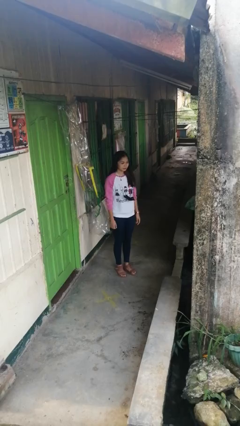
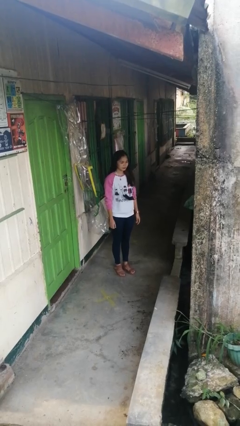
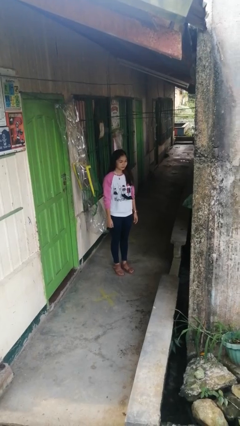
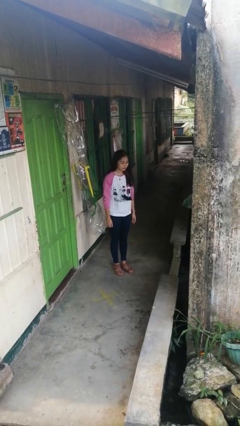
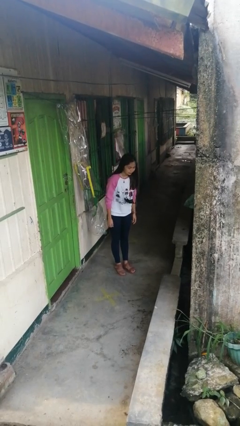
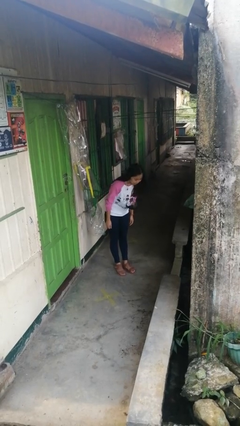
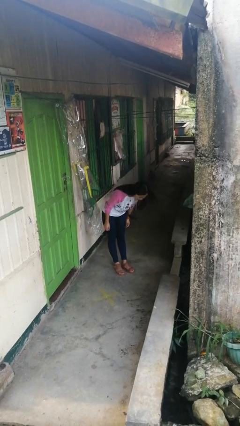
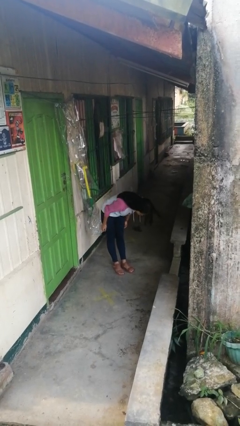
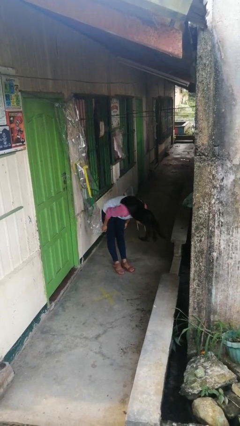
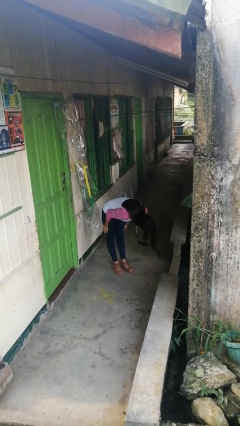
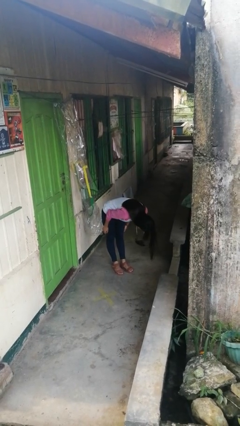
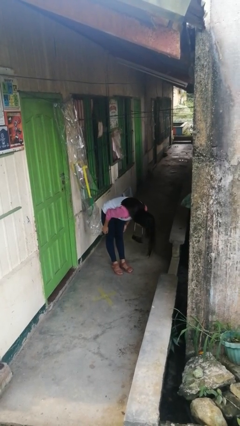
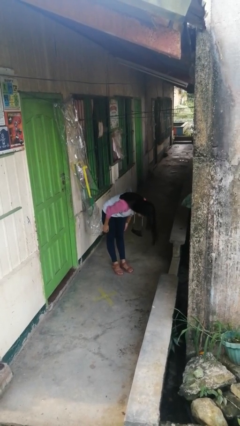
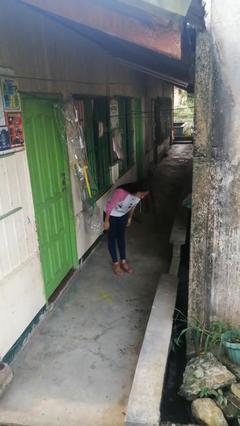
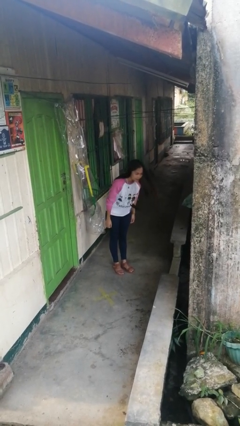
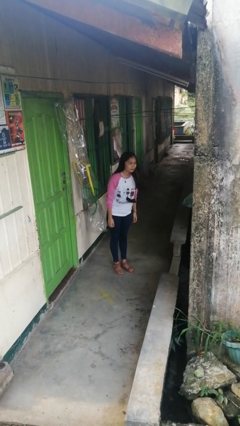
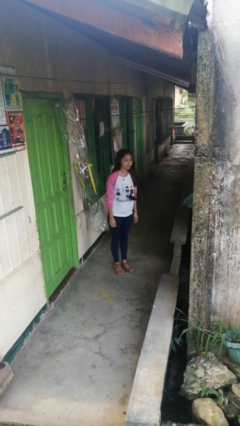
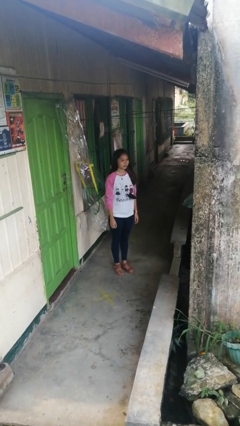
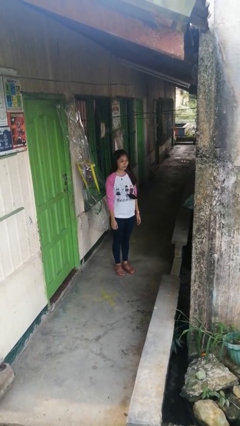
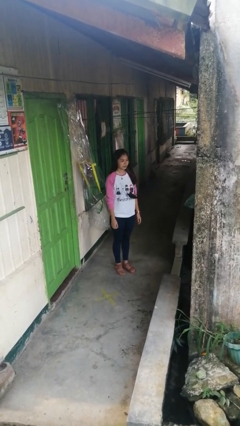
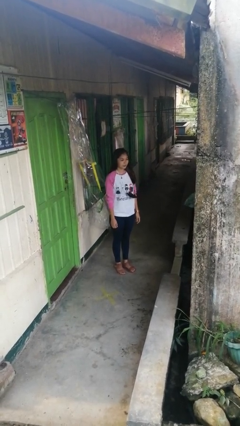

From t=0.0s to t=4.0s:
person bows

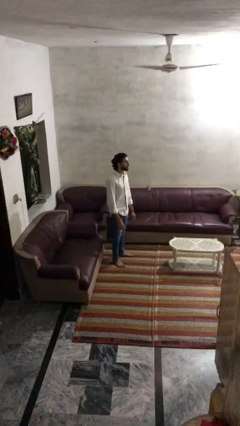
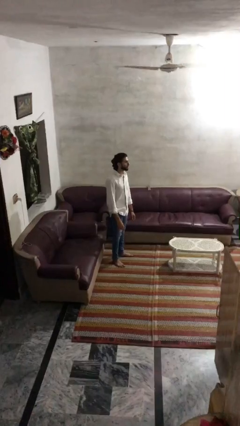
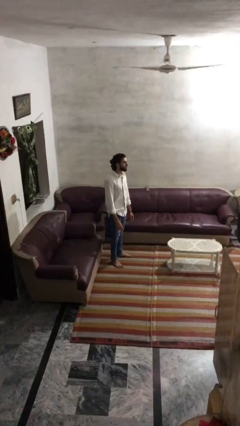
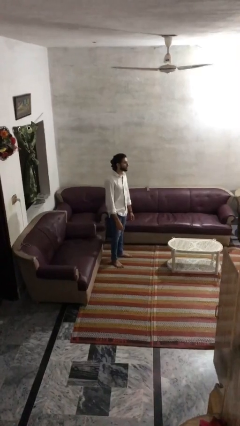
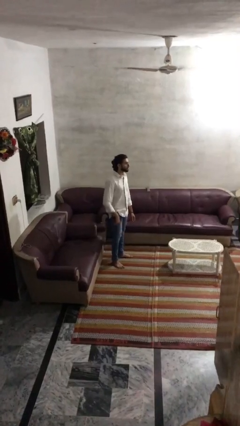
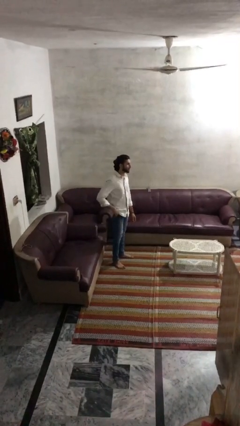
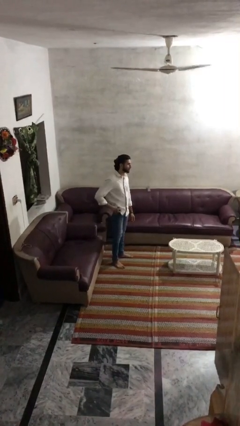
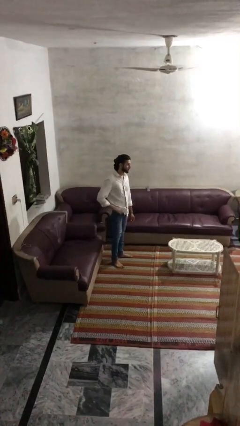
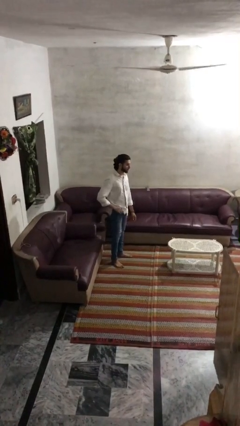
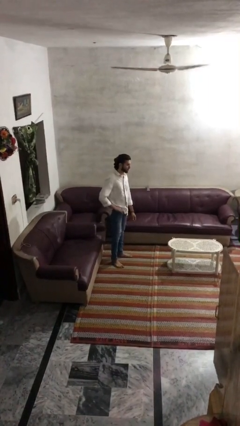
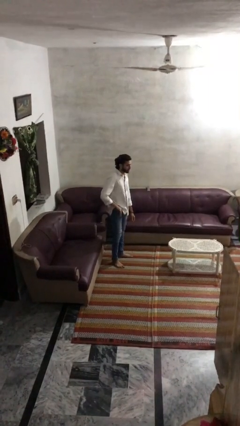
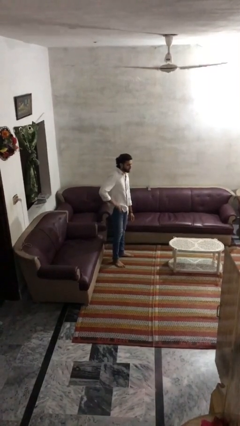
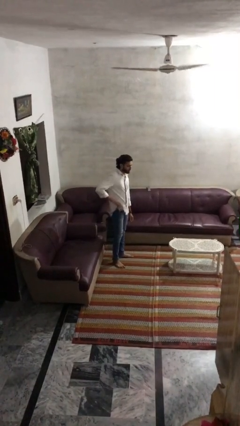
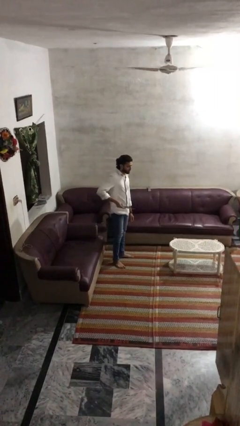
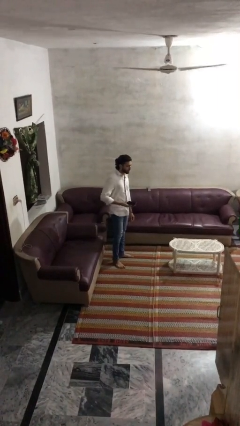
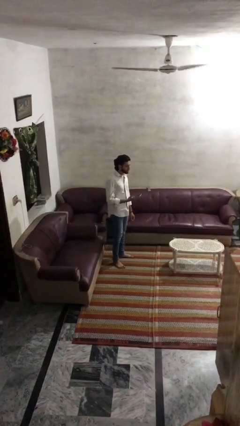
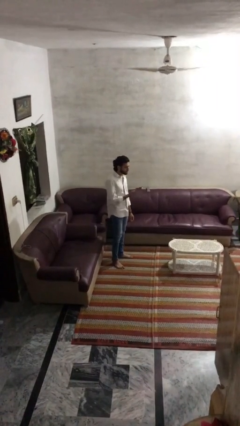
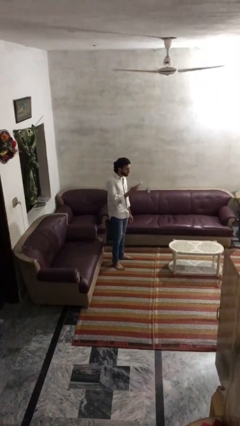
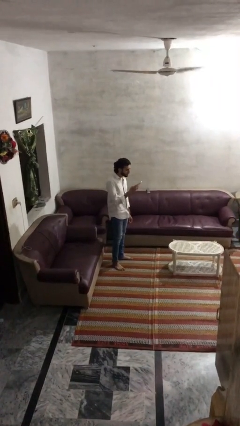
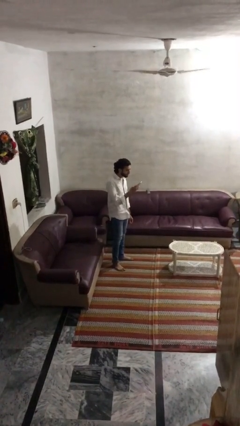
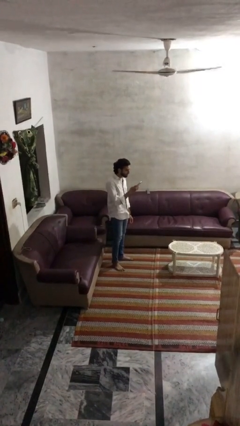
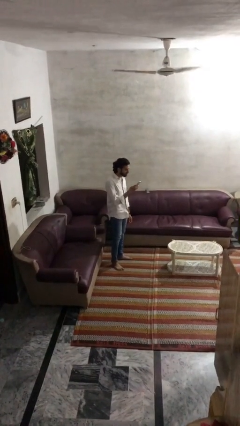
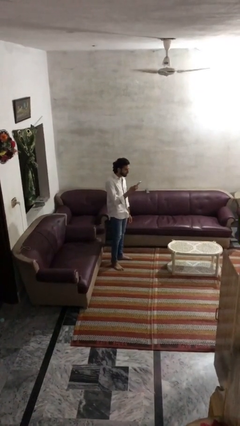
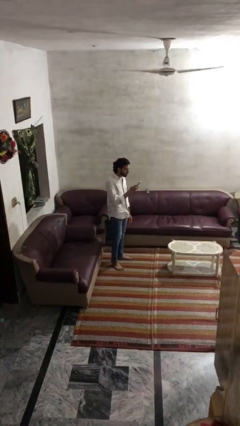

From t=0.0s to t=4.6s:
person takes phone from pocket

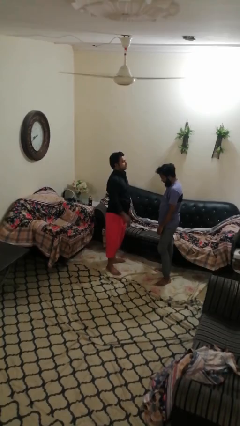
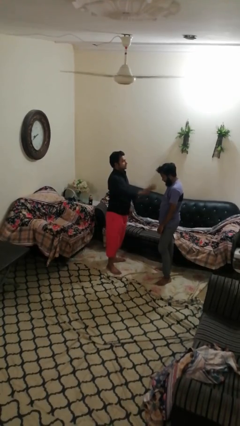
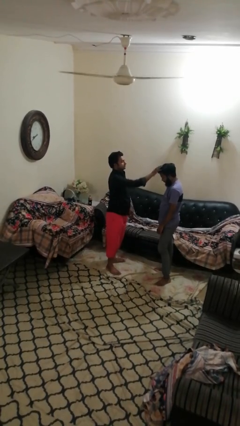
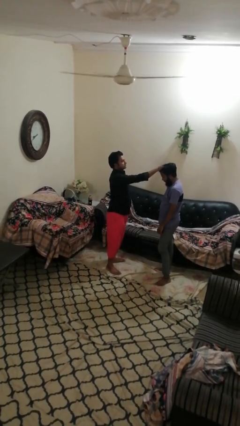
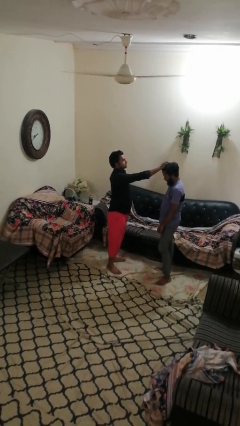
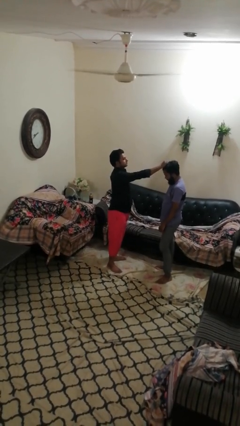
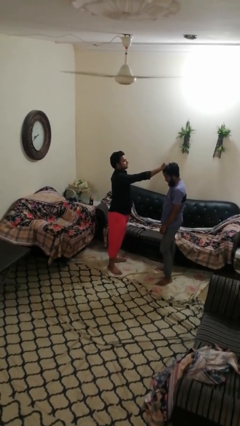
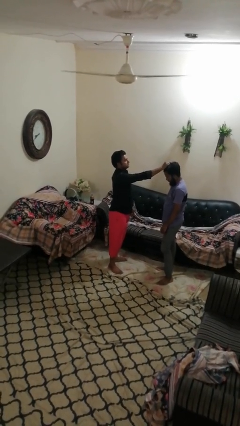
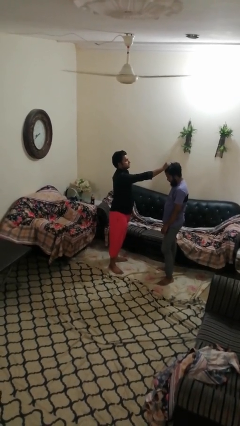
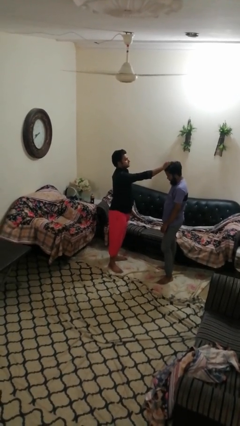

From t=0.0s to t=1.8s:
person grabs person by hair

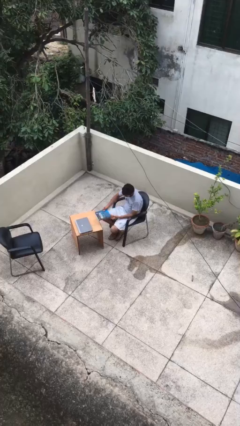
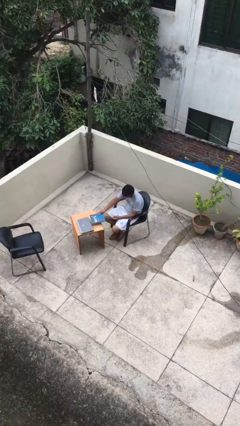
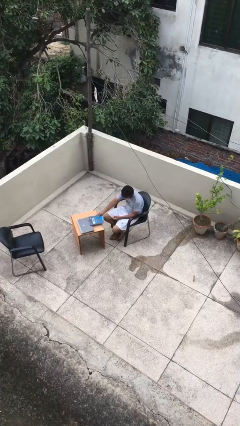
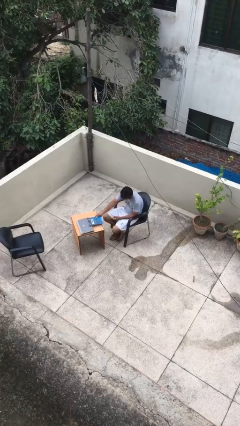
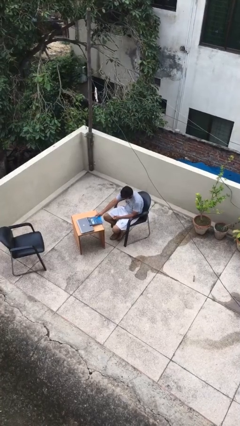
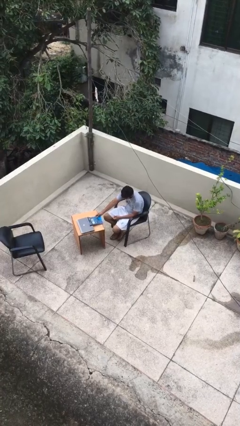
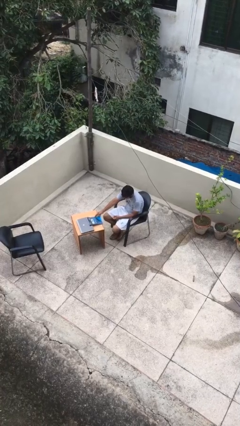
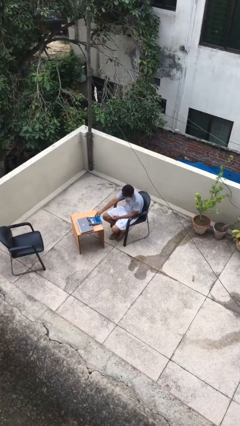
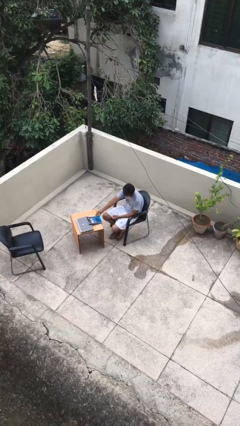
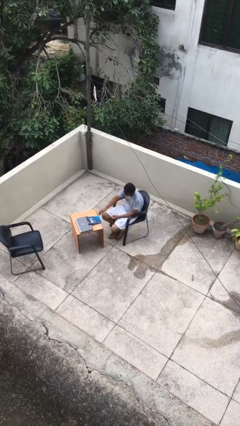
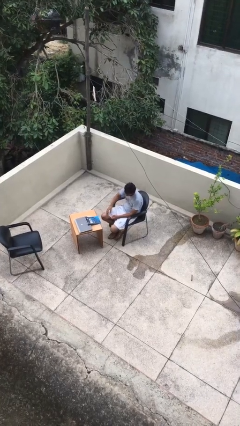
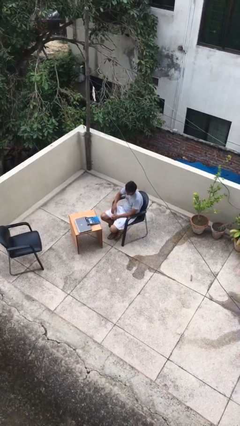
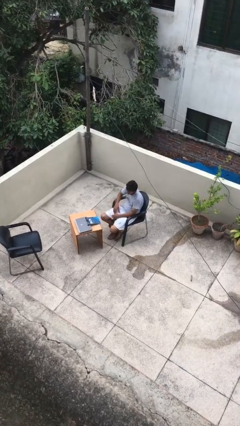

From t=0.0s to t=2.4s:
person puts down object on table

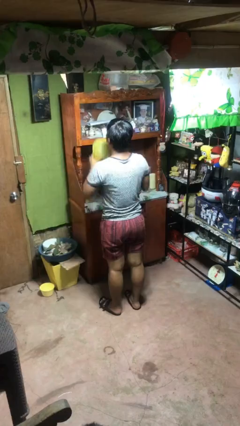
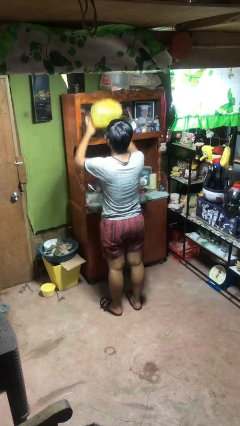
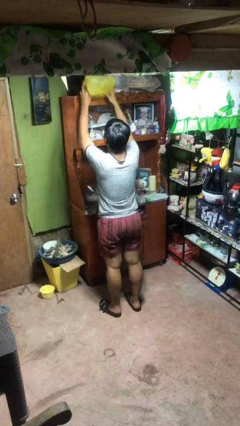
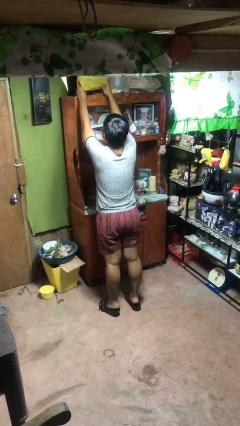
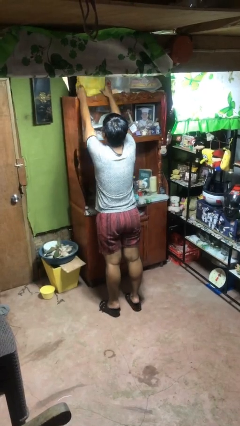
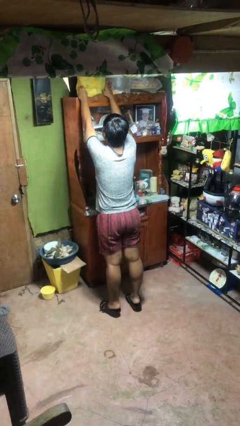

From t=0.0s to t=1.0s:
person puts down object on shelf

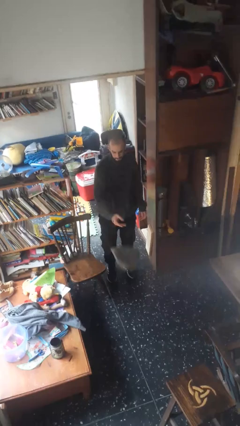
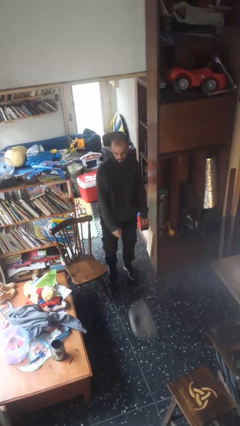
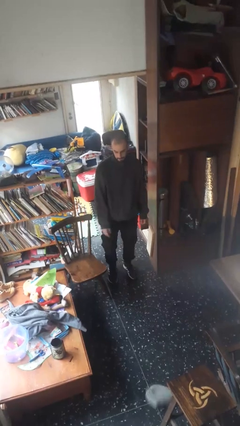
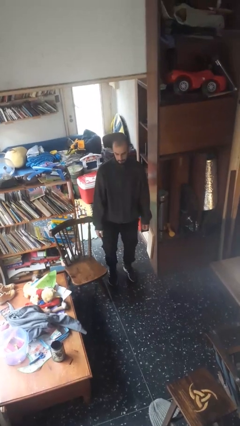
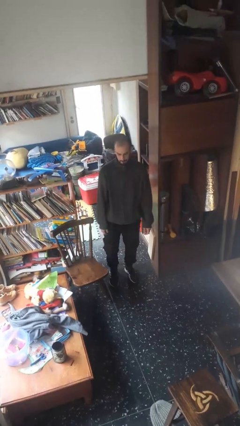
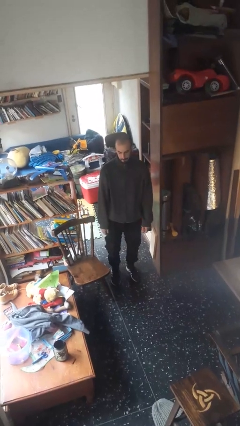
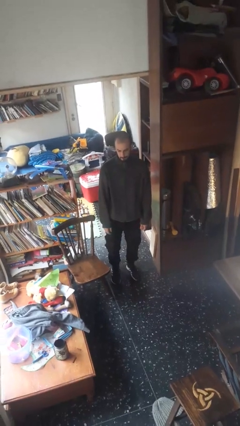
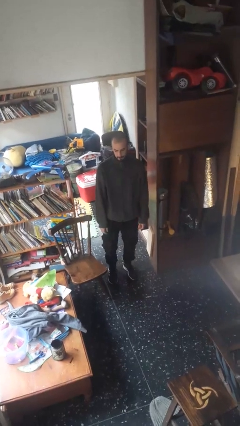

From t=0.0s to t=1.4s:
person throws object to ground

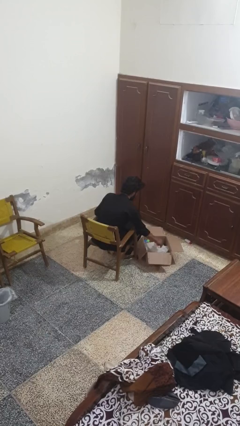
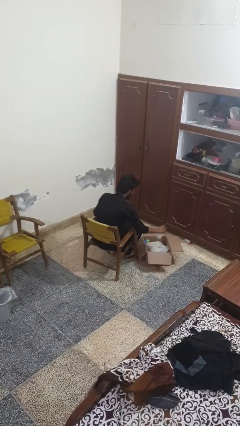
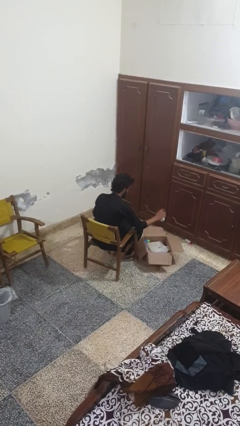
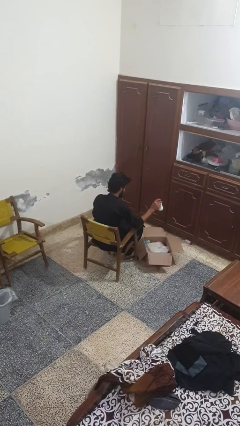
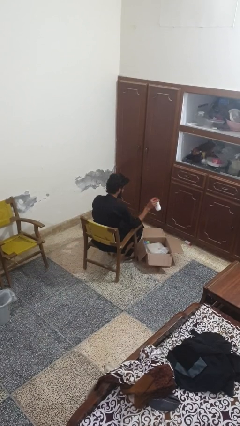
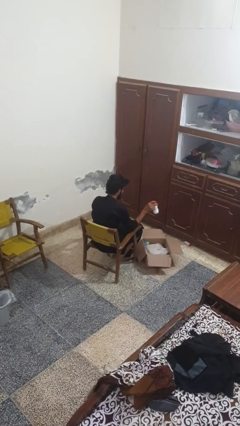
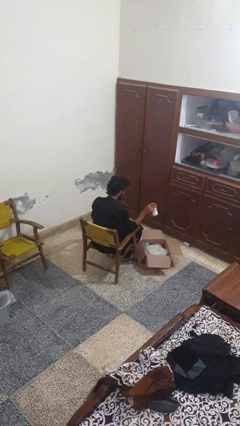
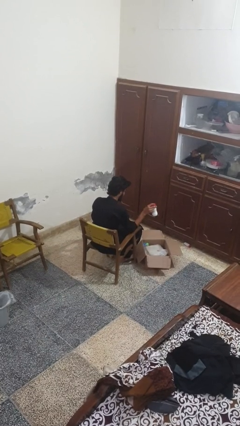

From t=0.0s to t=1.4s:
person takes object from box

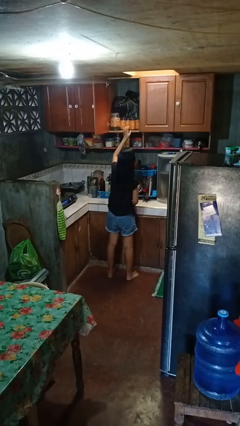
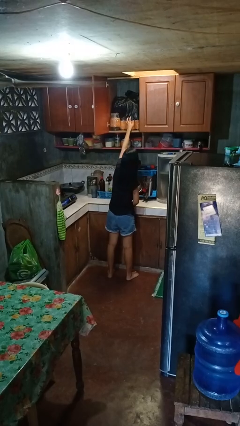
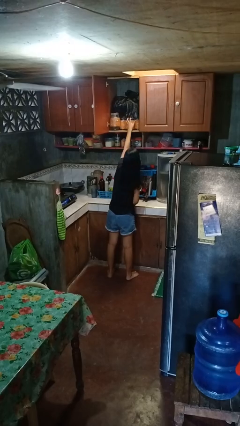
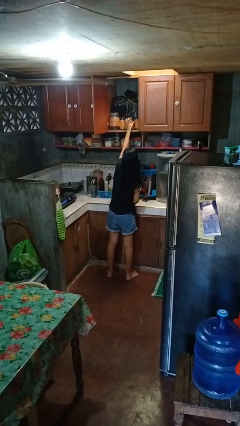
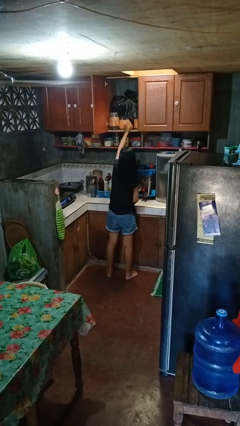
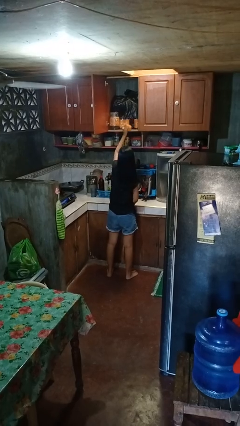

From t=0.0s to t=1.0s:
person picks up object from cabinet
